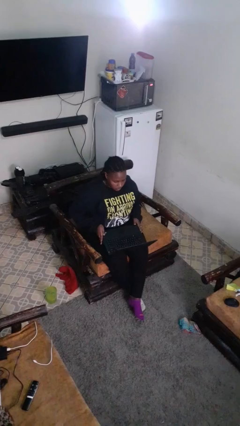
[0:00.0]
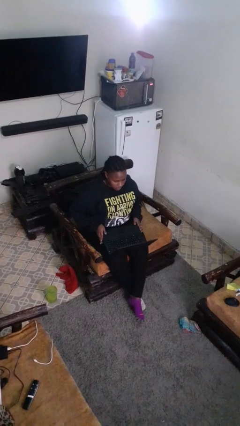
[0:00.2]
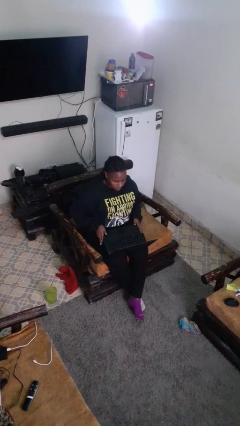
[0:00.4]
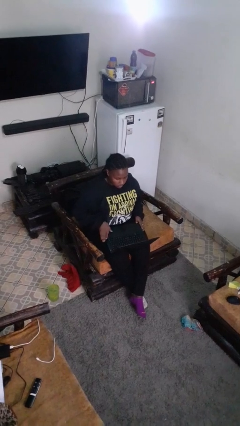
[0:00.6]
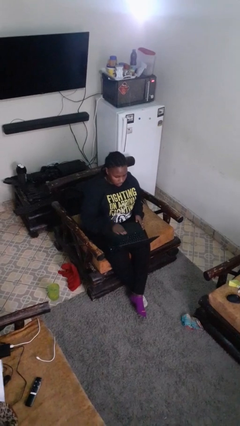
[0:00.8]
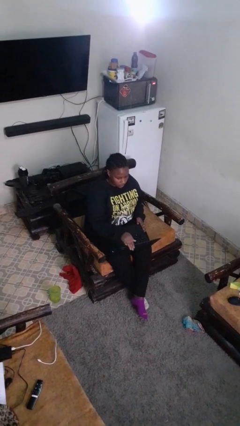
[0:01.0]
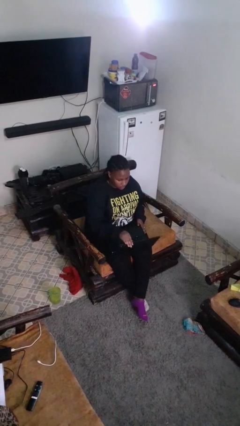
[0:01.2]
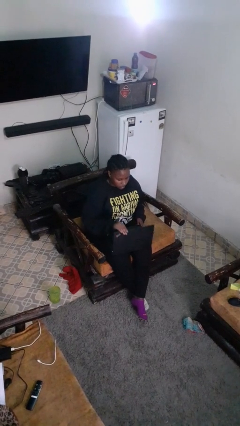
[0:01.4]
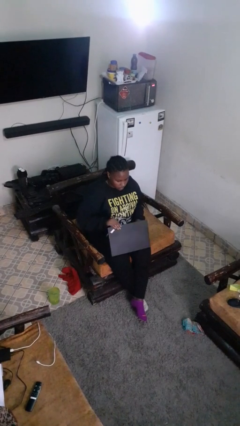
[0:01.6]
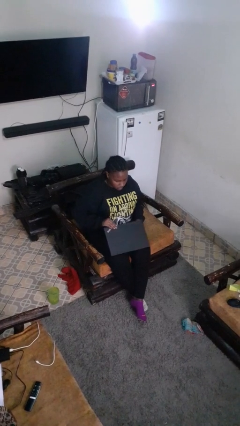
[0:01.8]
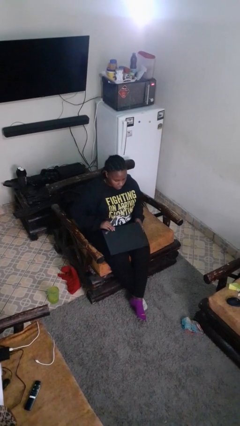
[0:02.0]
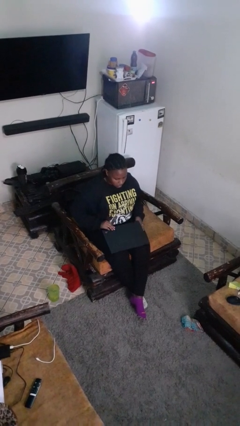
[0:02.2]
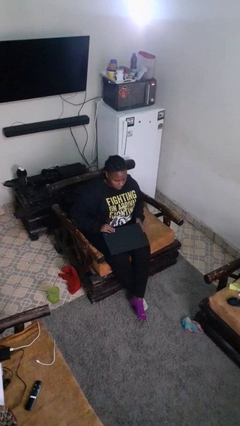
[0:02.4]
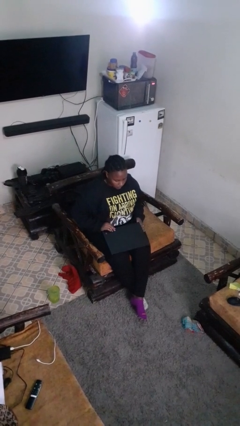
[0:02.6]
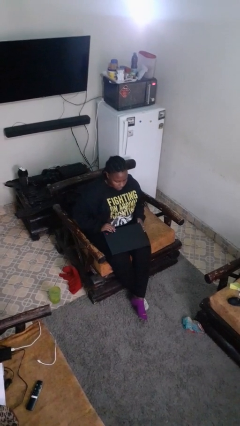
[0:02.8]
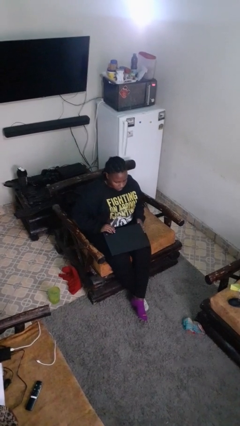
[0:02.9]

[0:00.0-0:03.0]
person closes laptop

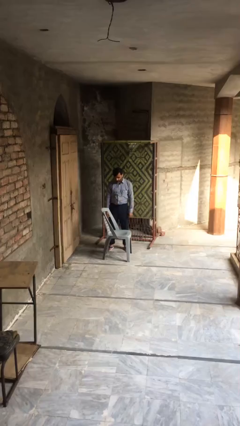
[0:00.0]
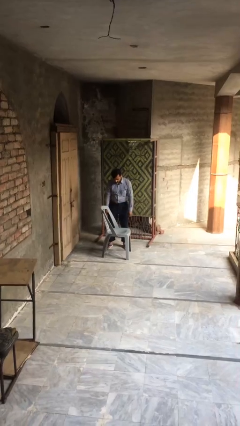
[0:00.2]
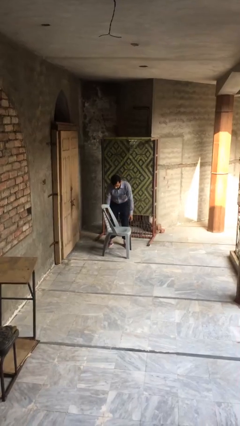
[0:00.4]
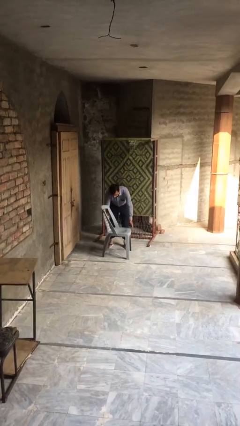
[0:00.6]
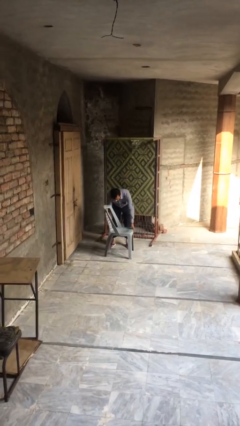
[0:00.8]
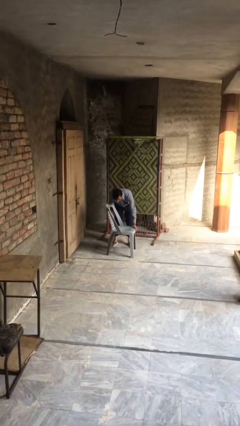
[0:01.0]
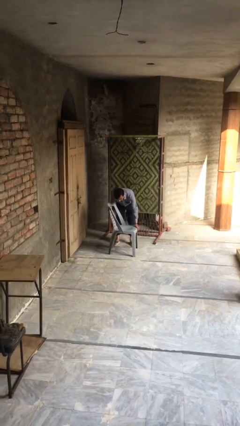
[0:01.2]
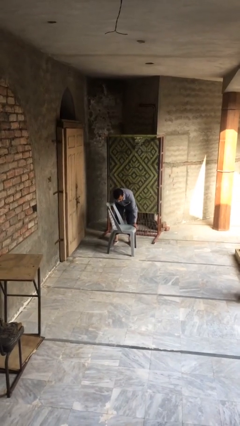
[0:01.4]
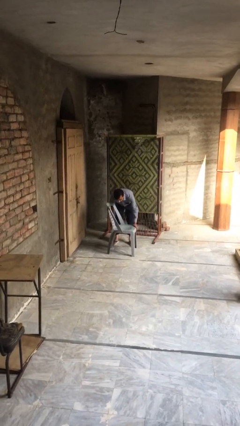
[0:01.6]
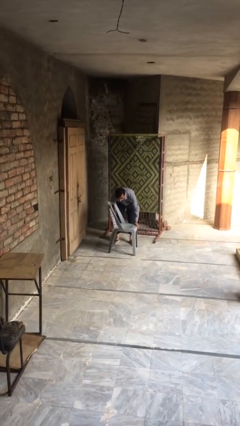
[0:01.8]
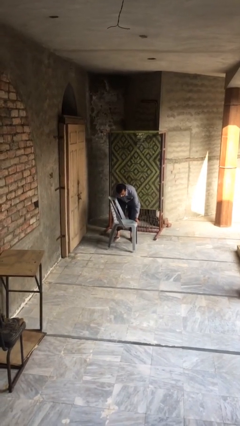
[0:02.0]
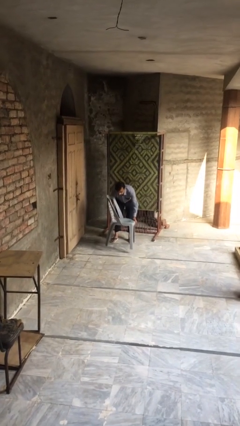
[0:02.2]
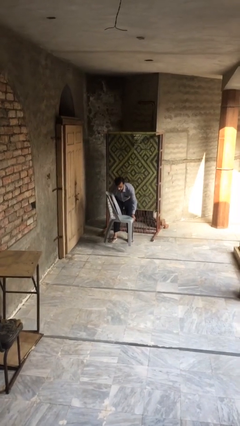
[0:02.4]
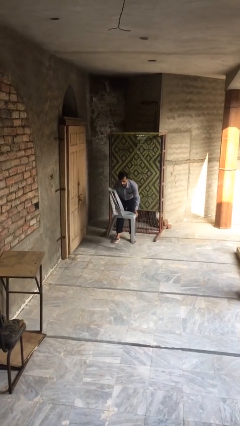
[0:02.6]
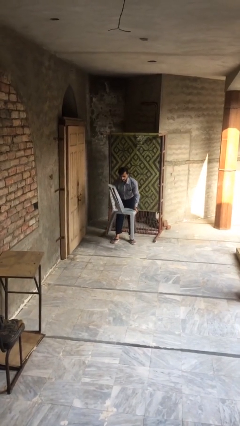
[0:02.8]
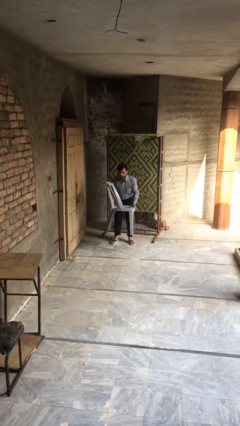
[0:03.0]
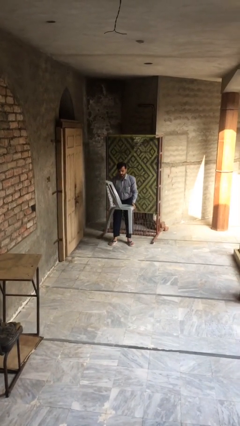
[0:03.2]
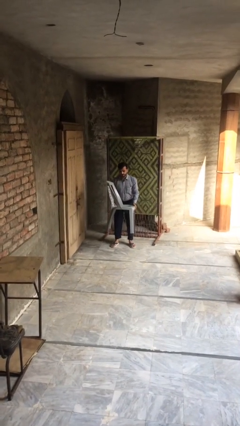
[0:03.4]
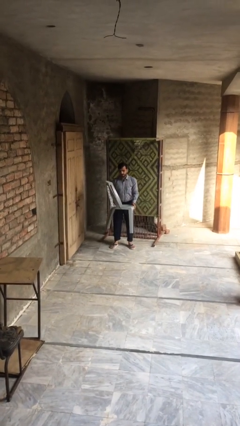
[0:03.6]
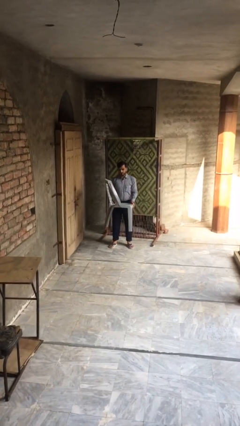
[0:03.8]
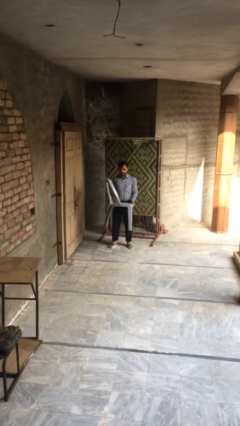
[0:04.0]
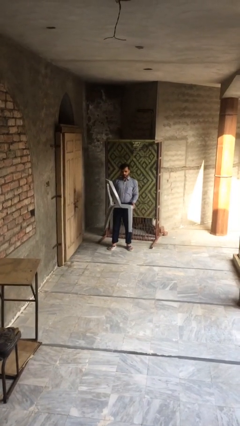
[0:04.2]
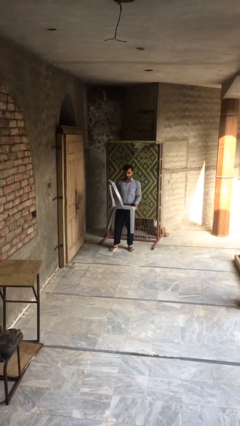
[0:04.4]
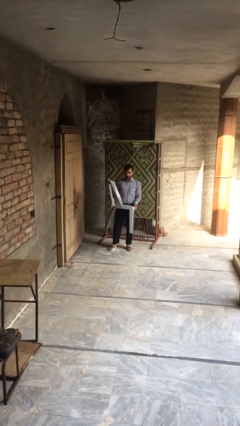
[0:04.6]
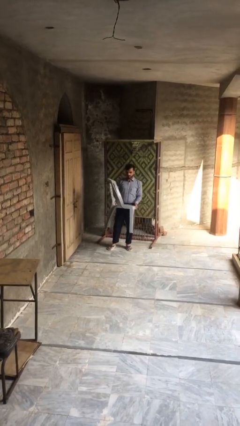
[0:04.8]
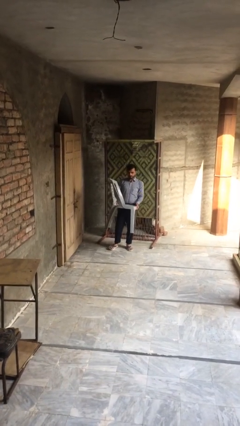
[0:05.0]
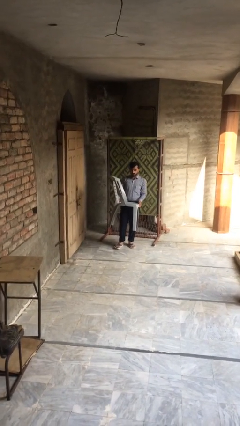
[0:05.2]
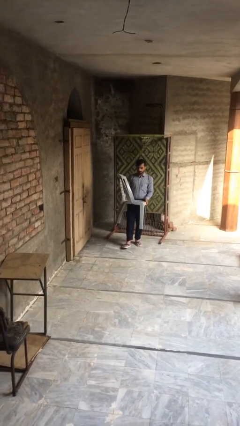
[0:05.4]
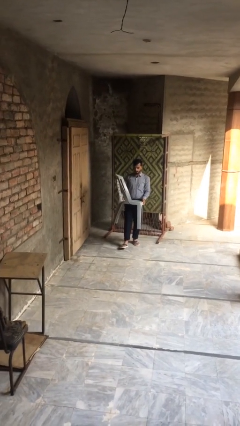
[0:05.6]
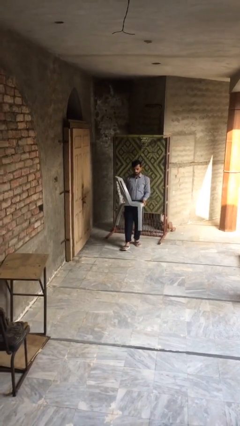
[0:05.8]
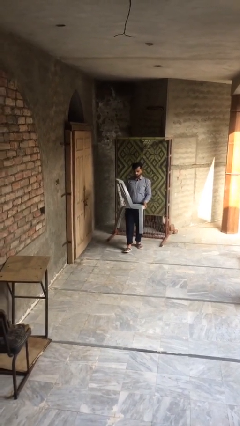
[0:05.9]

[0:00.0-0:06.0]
person picks up object from floor

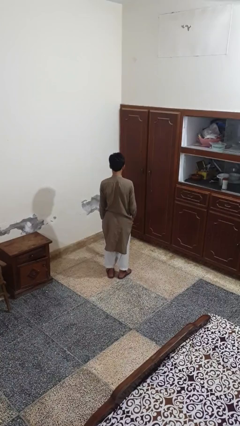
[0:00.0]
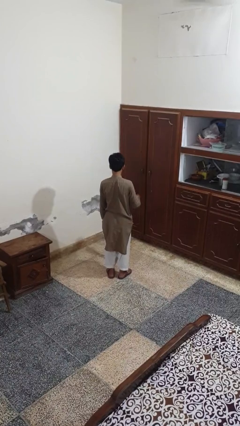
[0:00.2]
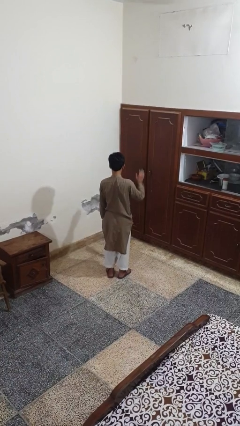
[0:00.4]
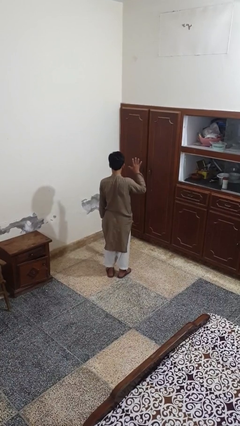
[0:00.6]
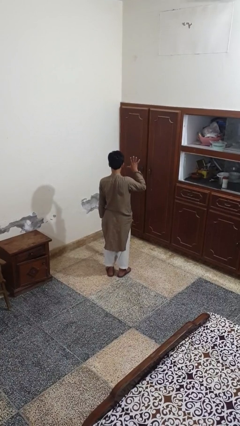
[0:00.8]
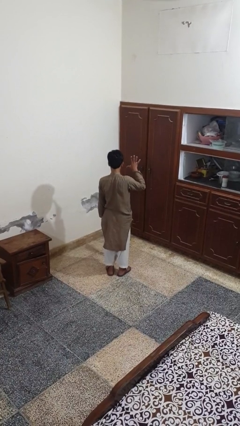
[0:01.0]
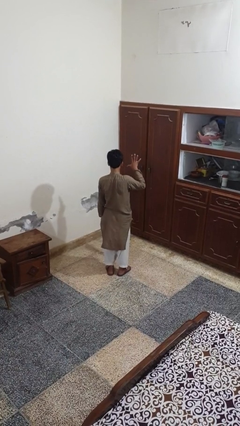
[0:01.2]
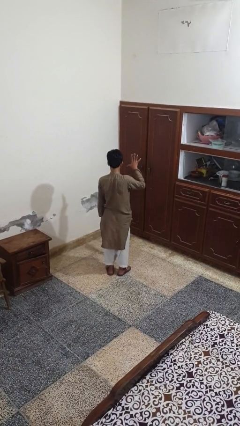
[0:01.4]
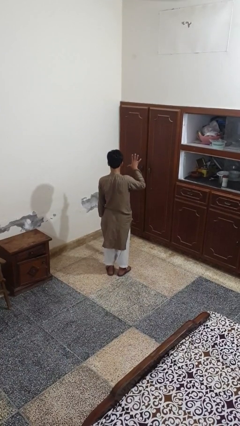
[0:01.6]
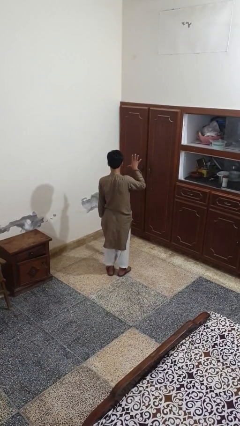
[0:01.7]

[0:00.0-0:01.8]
person gestures number five

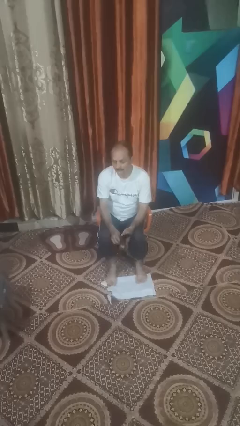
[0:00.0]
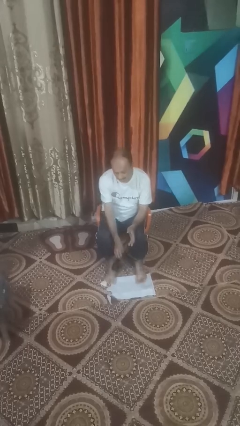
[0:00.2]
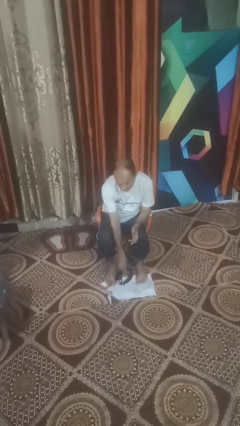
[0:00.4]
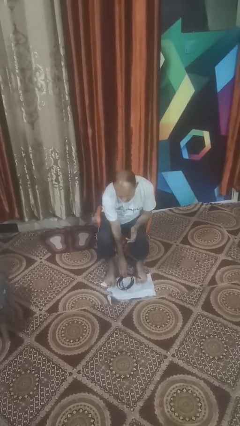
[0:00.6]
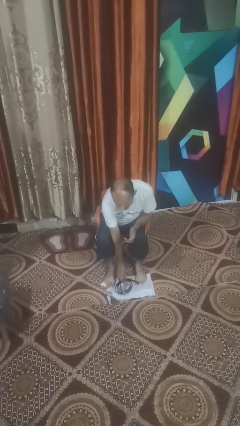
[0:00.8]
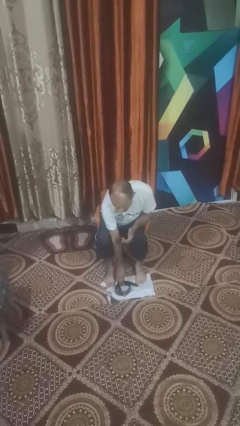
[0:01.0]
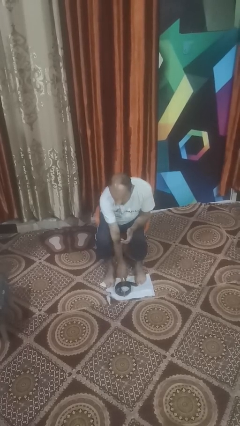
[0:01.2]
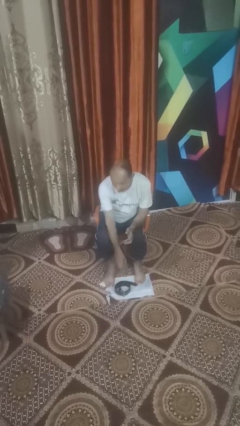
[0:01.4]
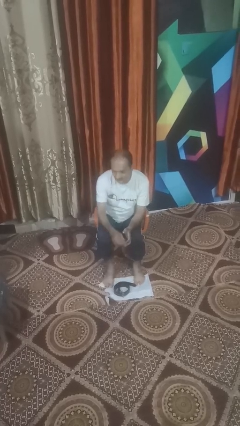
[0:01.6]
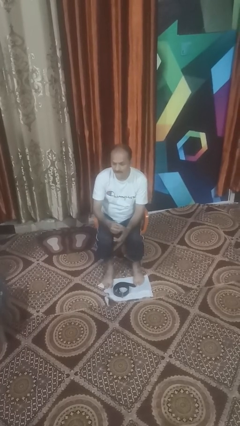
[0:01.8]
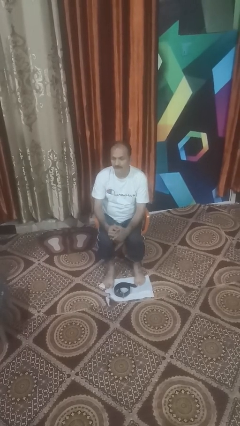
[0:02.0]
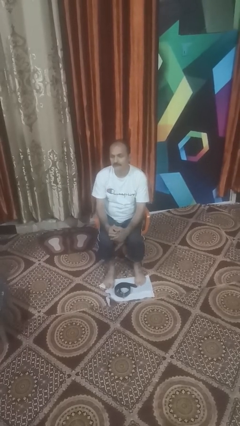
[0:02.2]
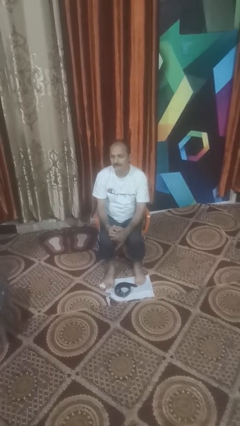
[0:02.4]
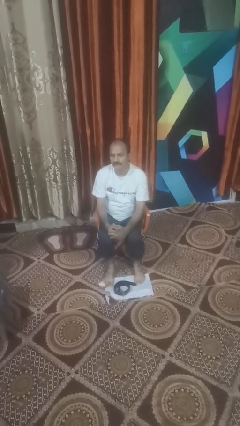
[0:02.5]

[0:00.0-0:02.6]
person takes off belt

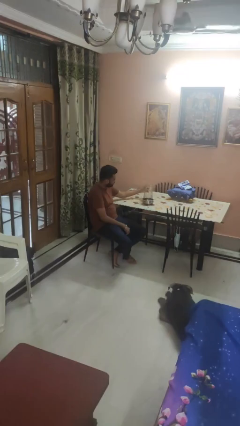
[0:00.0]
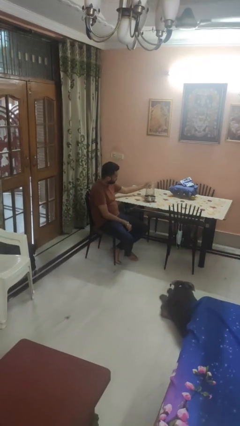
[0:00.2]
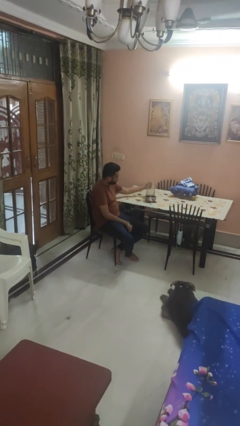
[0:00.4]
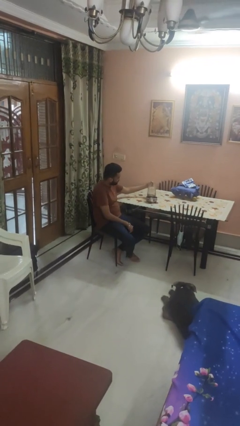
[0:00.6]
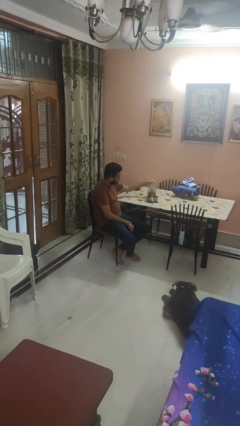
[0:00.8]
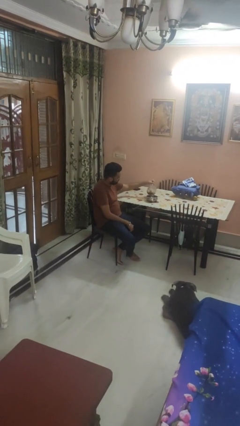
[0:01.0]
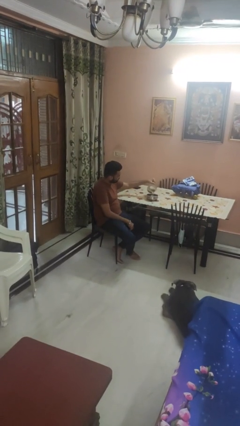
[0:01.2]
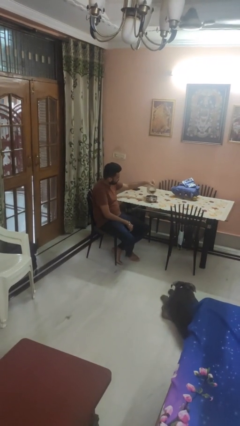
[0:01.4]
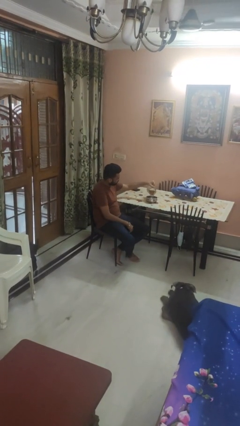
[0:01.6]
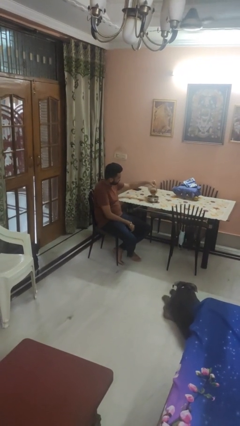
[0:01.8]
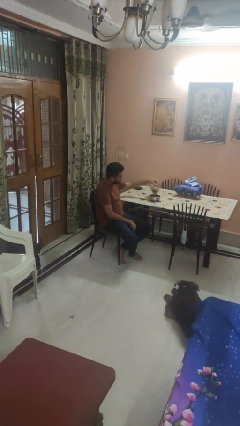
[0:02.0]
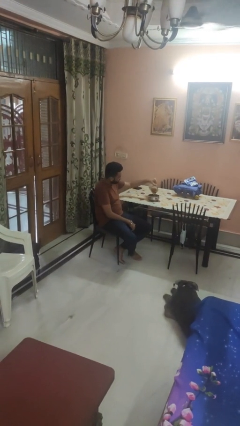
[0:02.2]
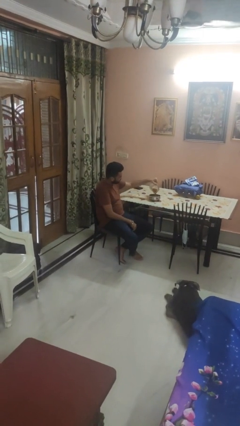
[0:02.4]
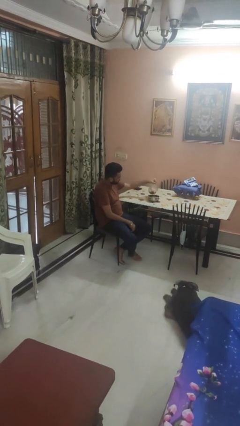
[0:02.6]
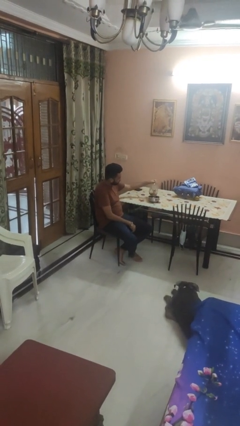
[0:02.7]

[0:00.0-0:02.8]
person pours into bowl

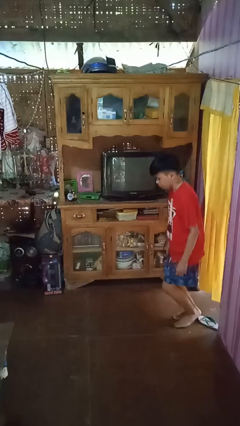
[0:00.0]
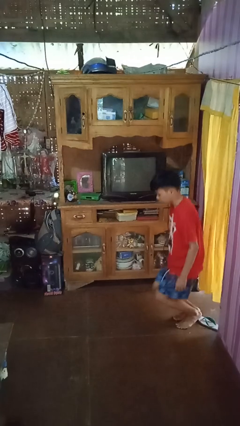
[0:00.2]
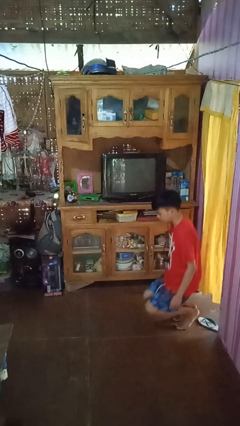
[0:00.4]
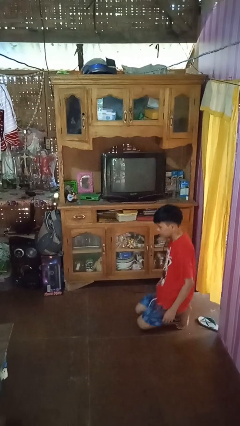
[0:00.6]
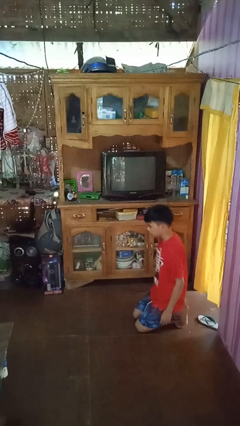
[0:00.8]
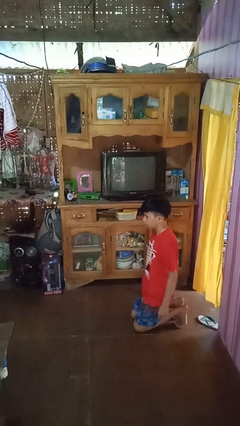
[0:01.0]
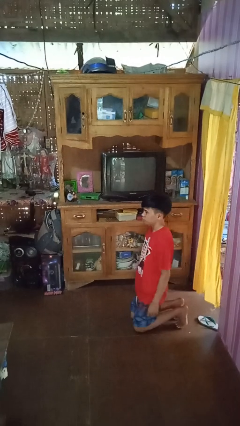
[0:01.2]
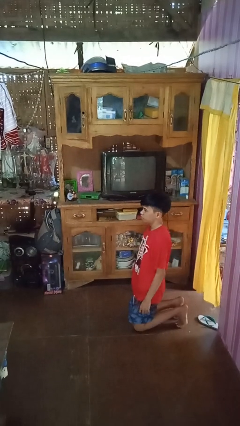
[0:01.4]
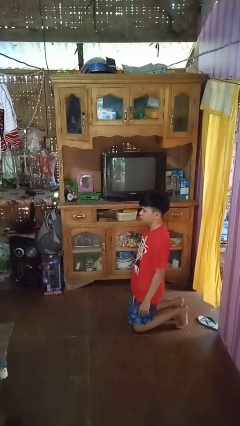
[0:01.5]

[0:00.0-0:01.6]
person kneels
